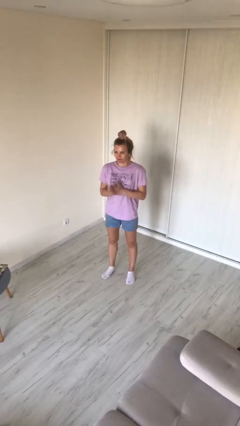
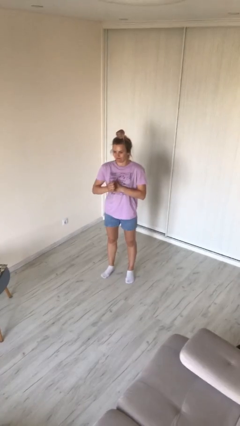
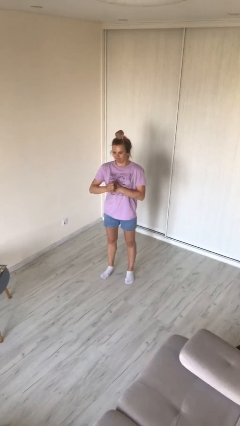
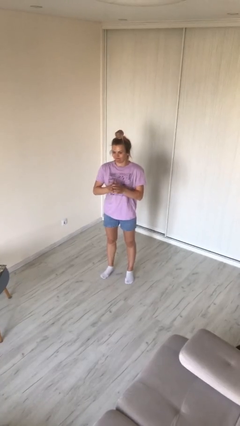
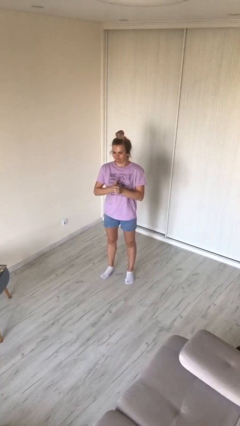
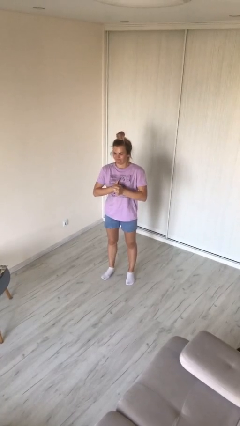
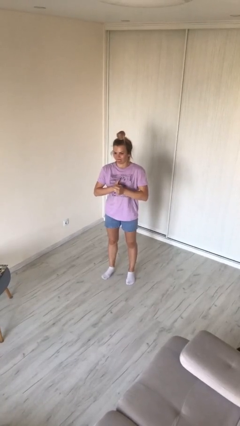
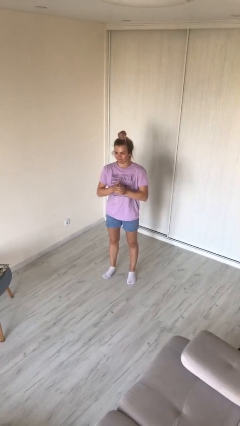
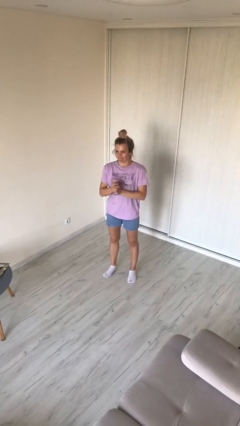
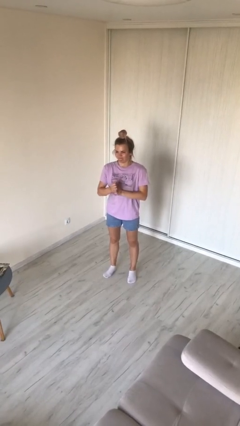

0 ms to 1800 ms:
person cracks knuckles

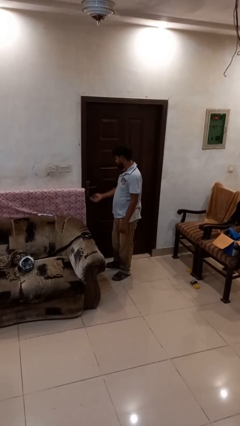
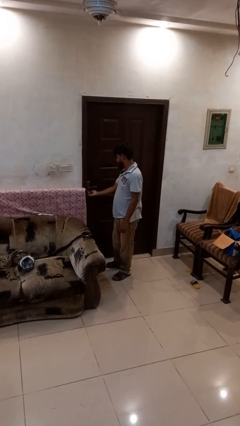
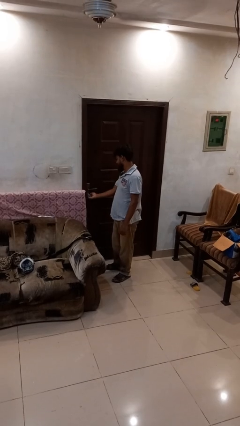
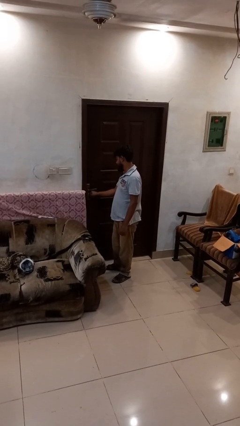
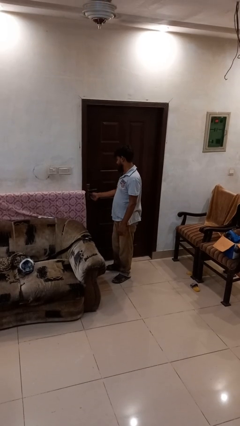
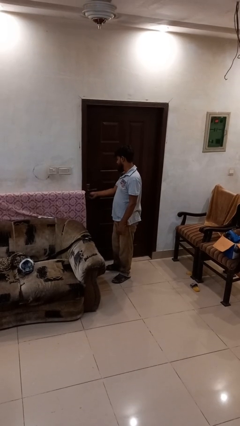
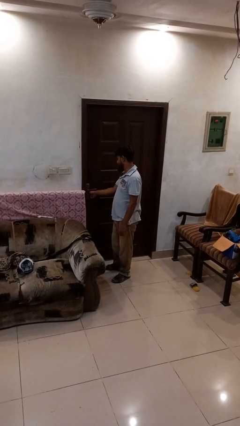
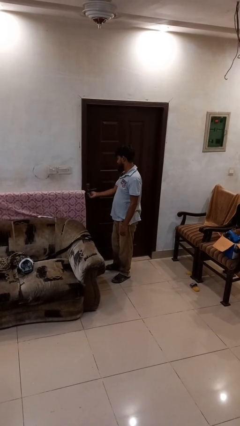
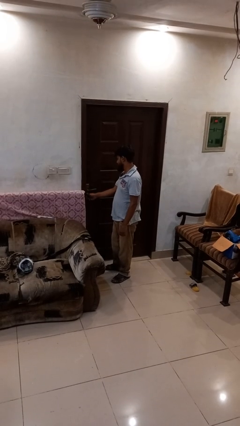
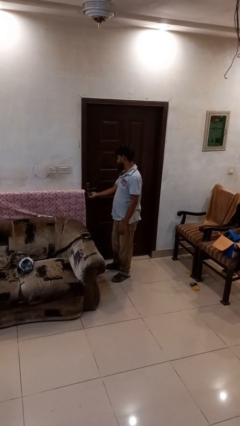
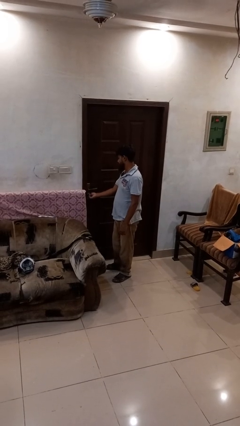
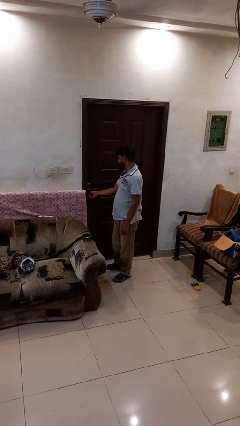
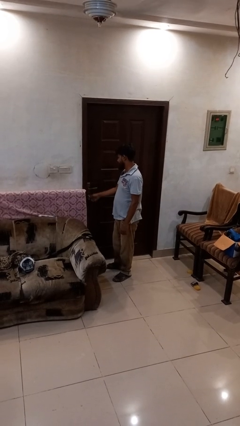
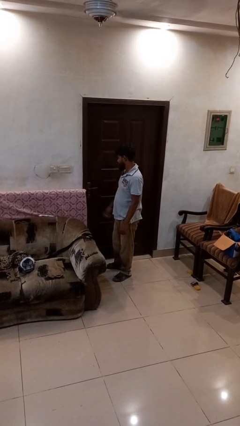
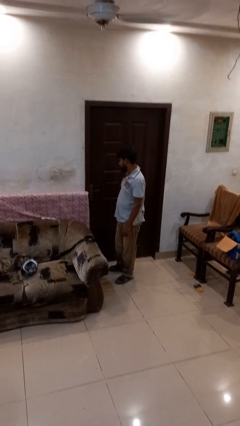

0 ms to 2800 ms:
person locks door with keys

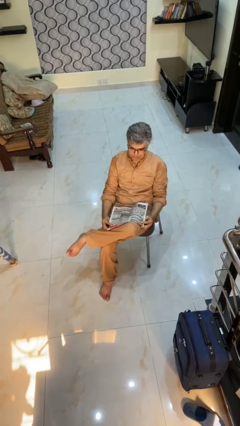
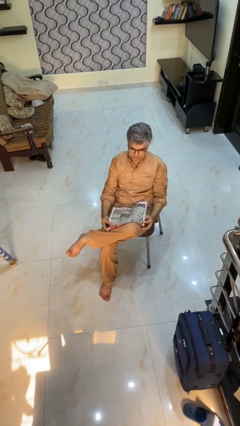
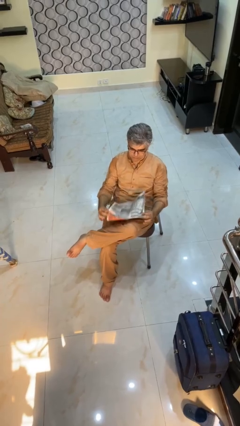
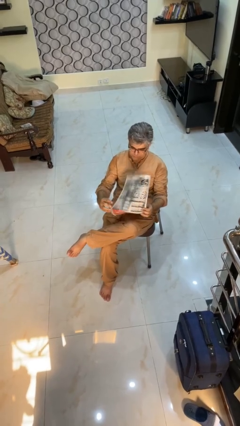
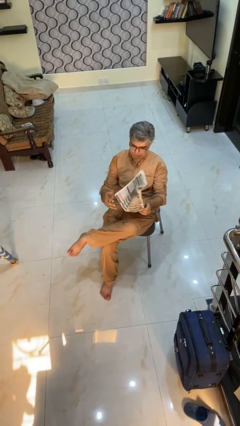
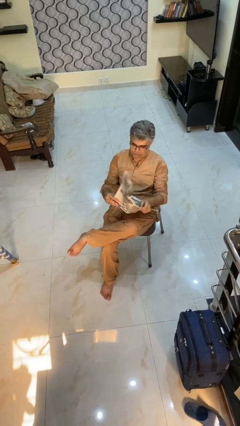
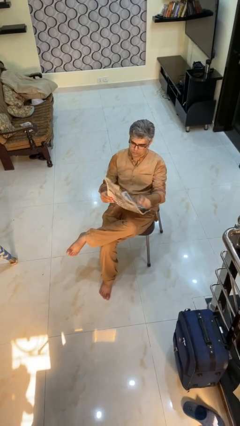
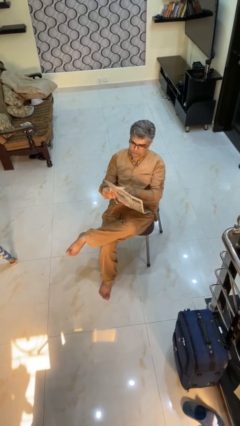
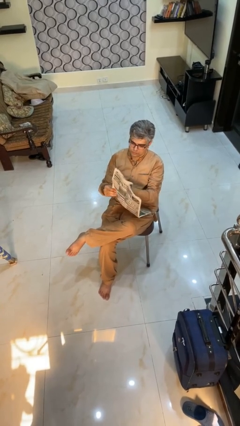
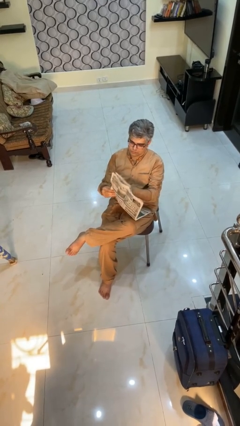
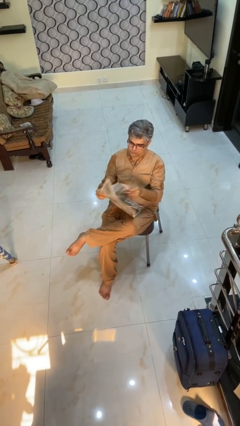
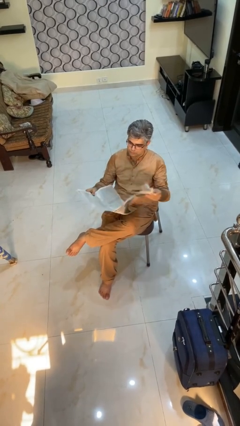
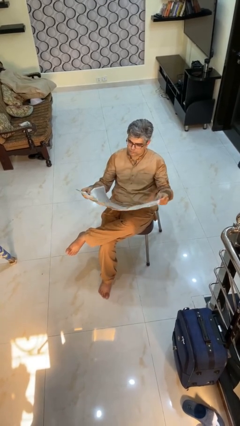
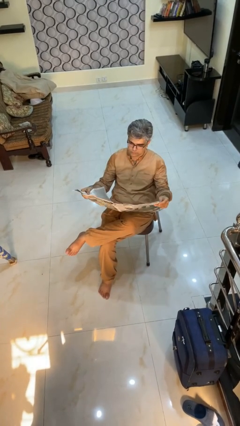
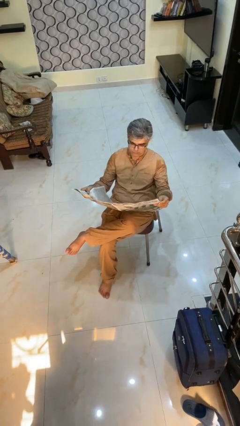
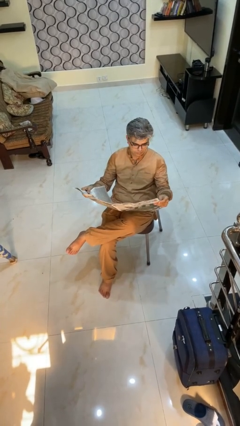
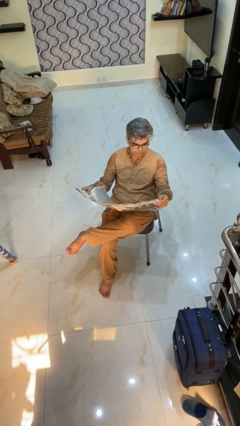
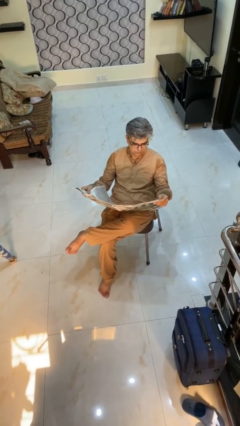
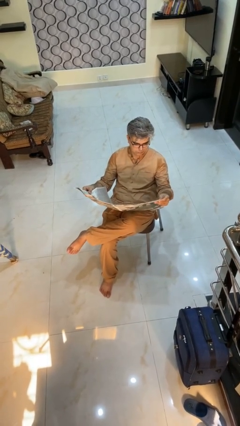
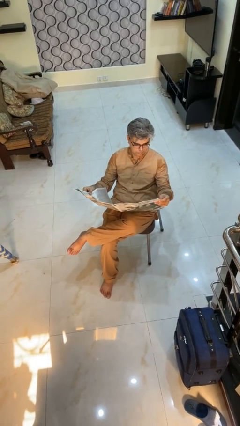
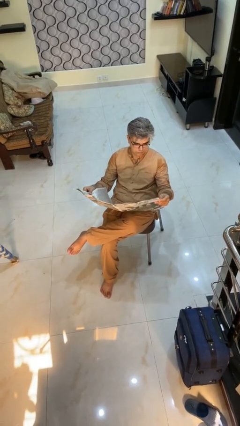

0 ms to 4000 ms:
person reads newspaper

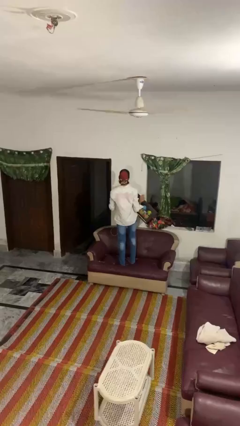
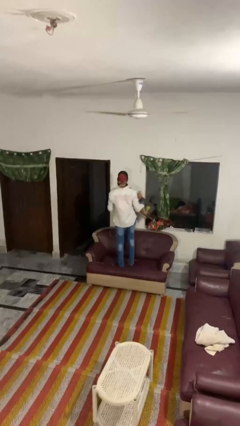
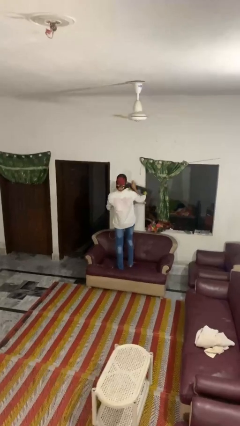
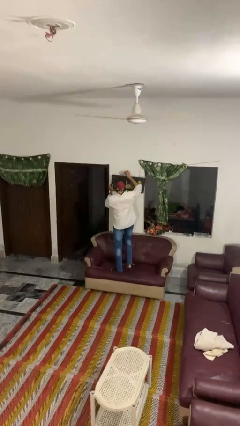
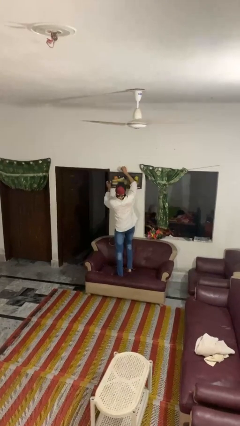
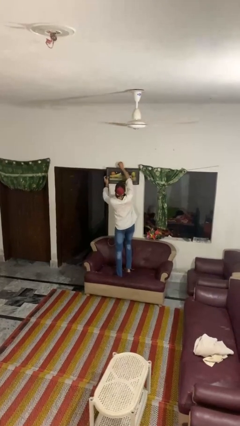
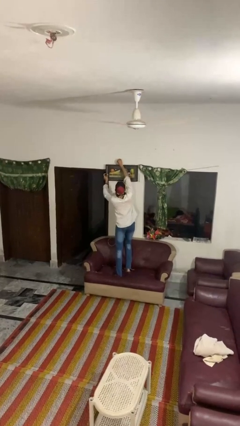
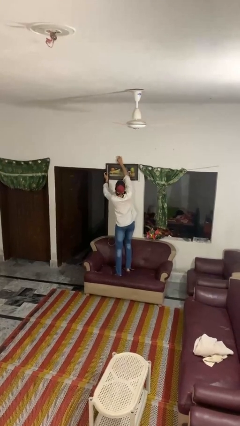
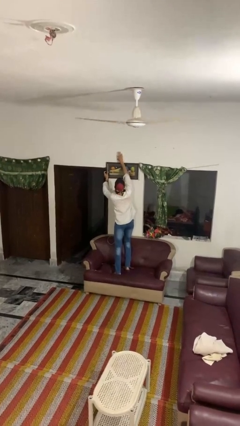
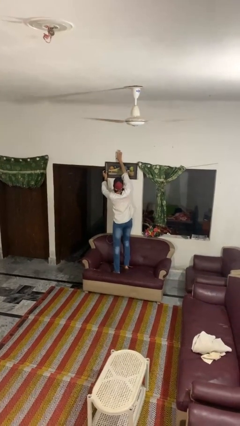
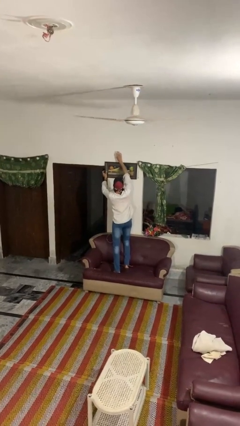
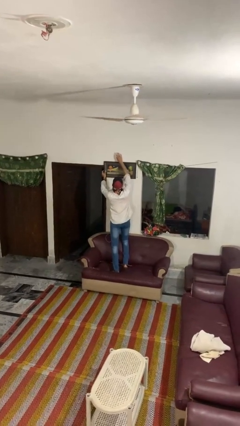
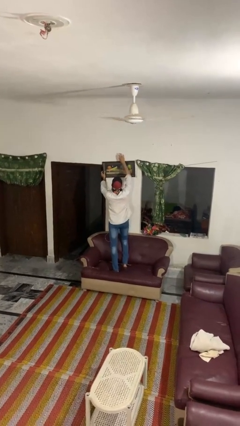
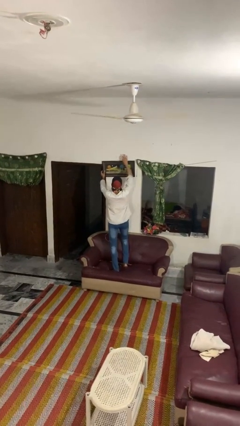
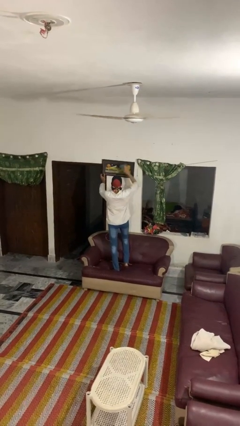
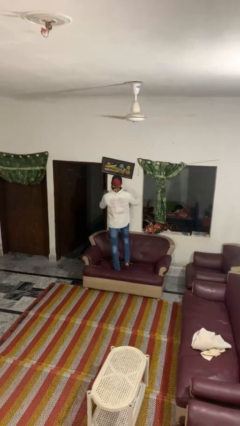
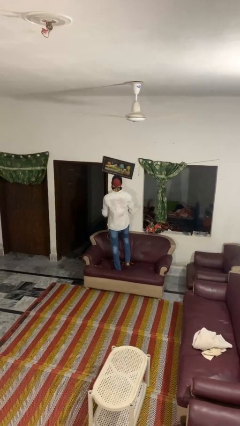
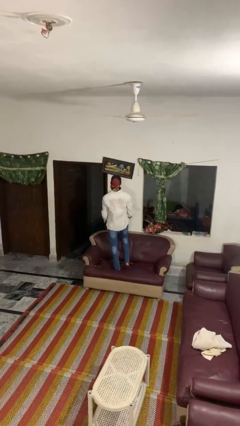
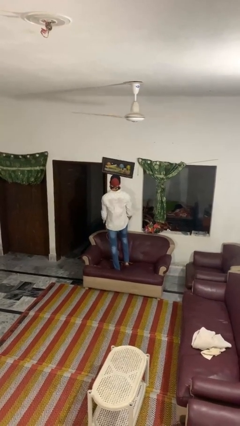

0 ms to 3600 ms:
person puts up picture frame

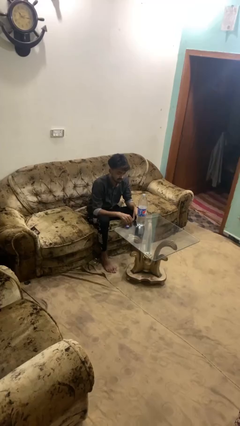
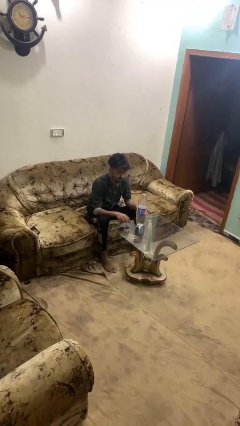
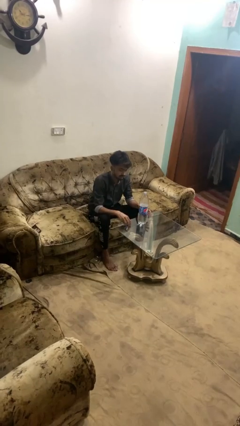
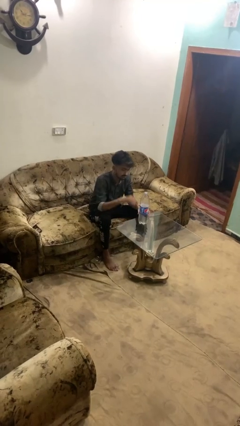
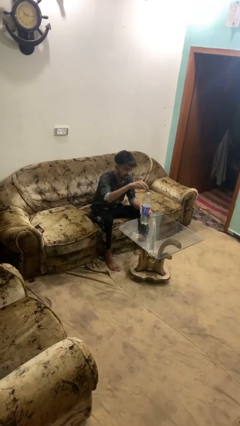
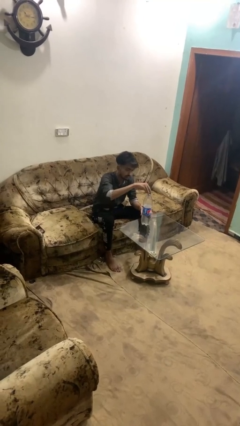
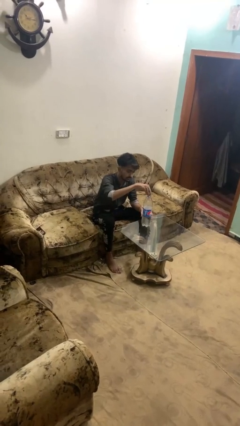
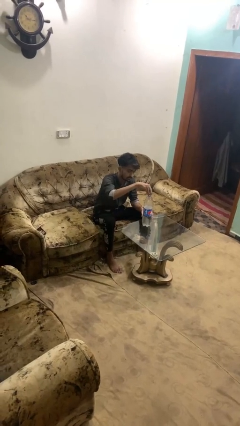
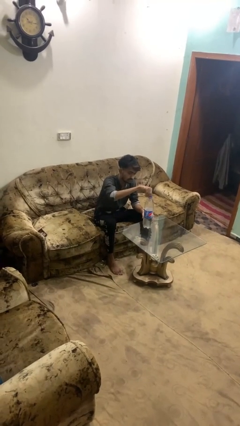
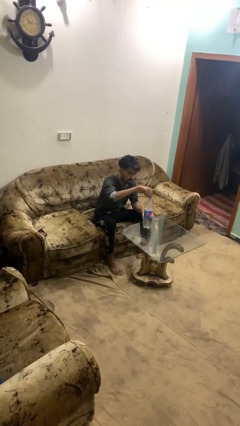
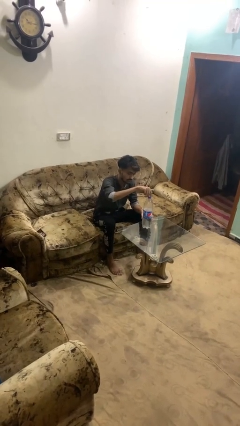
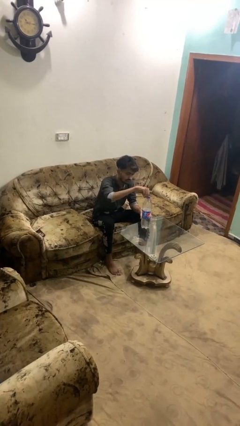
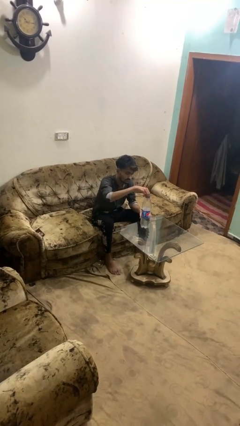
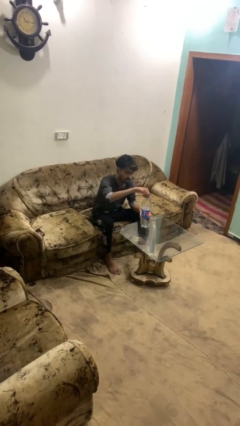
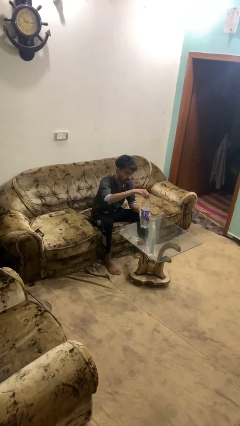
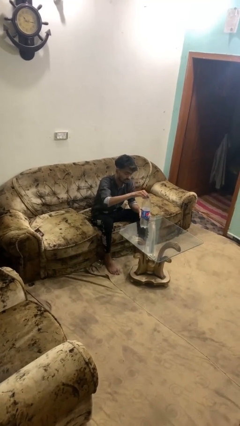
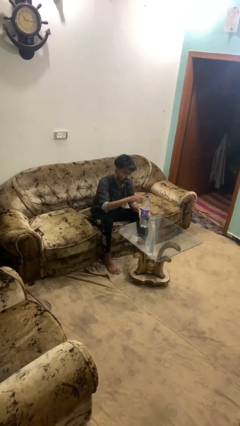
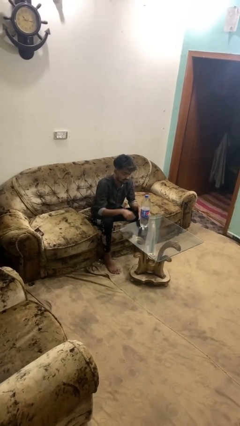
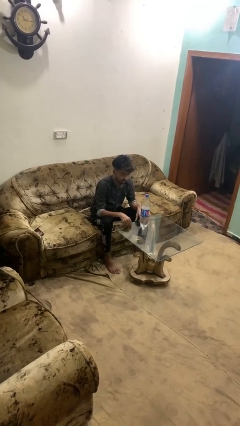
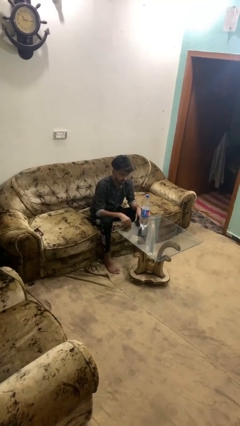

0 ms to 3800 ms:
person screws lid to bottle

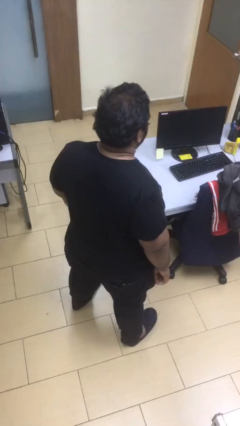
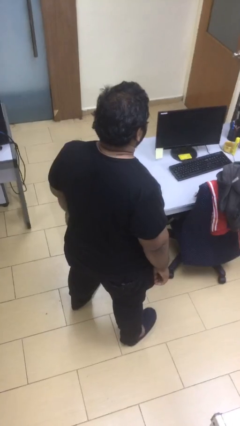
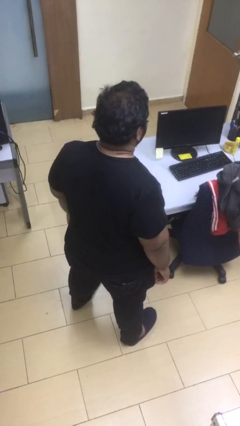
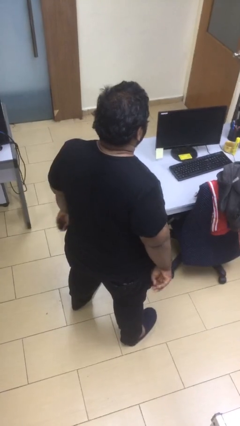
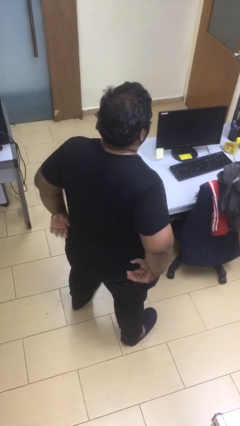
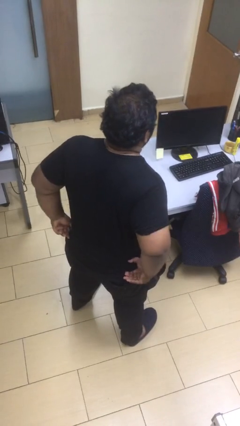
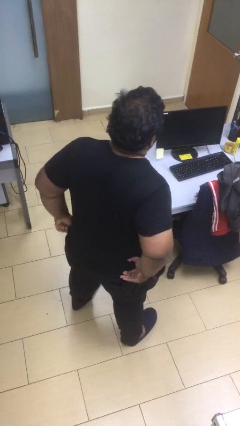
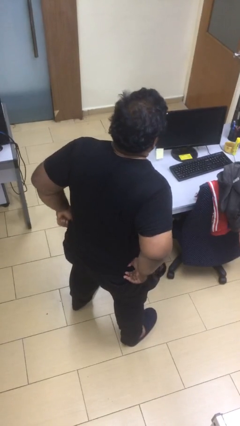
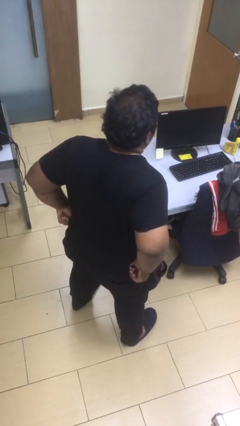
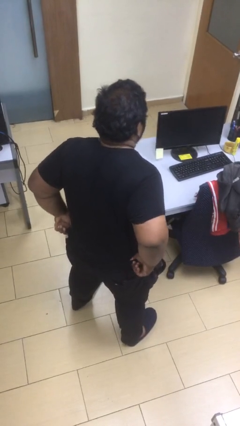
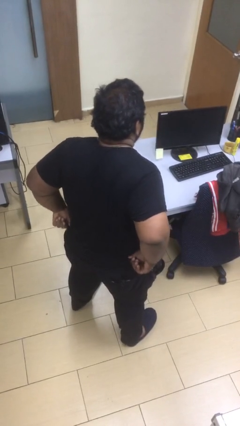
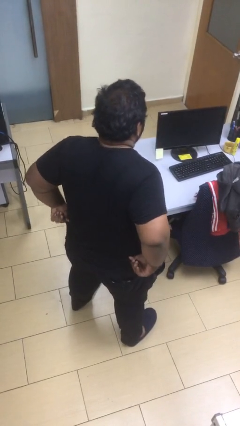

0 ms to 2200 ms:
person hikes up pants
